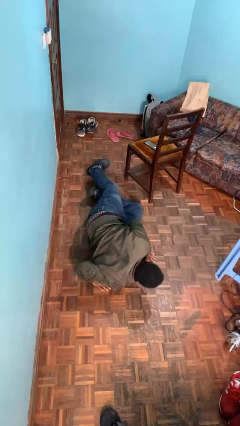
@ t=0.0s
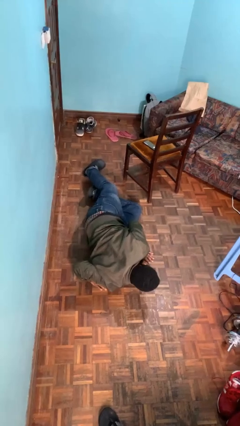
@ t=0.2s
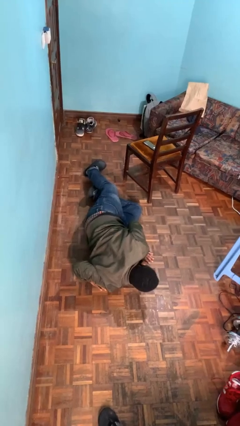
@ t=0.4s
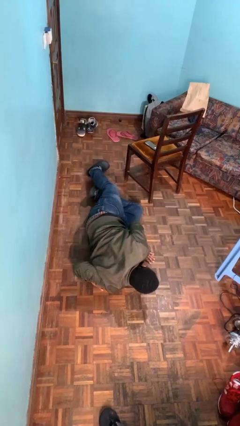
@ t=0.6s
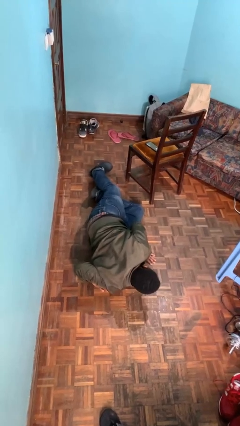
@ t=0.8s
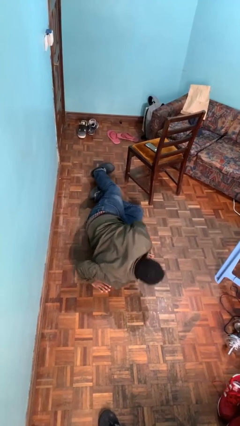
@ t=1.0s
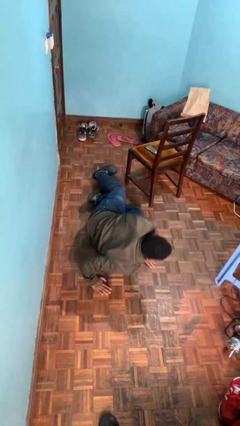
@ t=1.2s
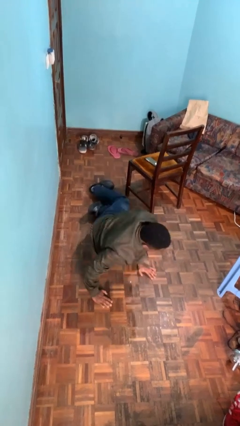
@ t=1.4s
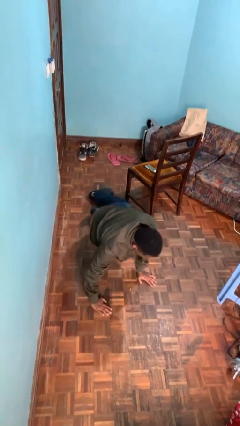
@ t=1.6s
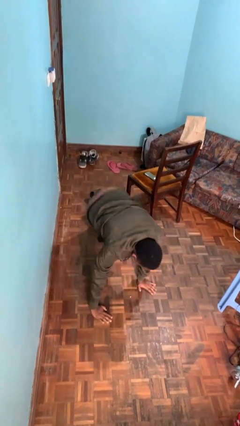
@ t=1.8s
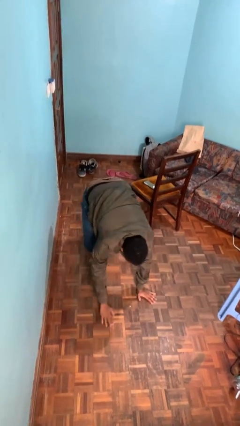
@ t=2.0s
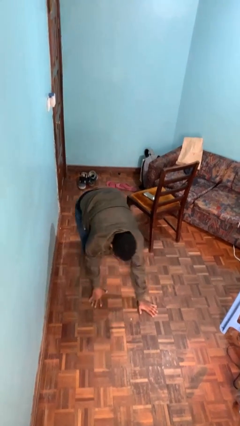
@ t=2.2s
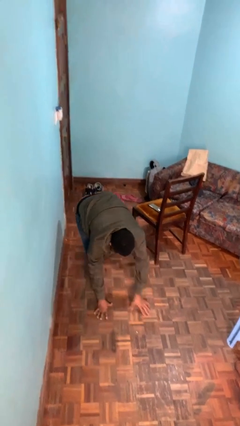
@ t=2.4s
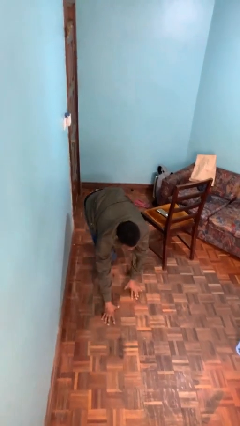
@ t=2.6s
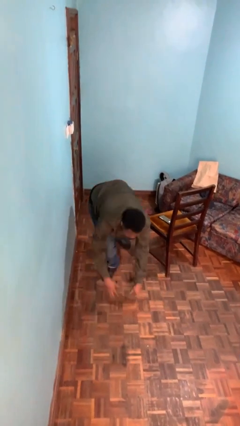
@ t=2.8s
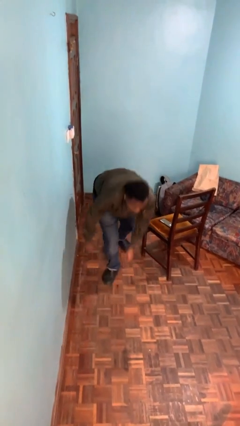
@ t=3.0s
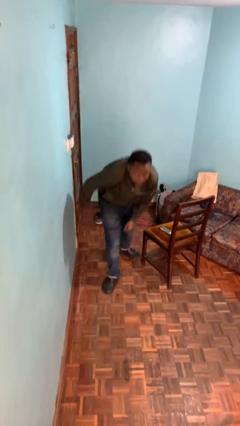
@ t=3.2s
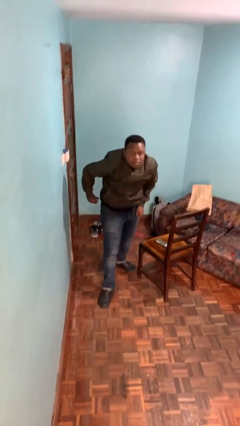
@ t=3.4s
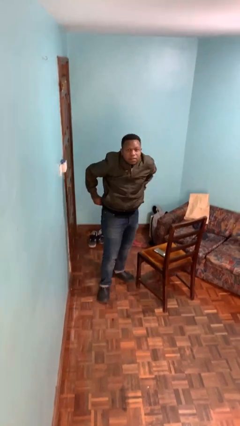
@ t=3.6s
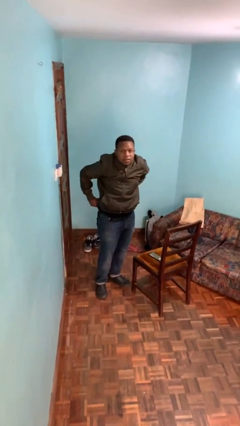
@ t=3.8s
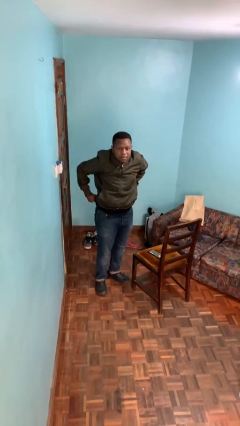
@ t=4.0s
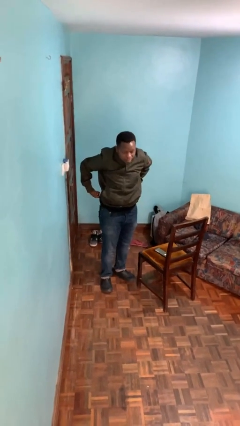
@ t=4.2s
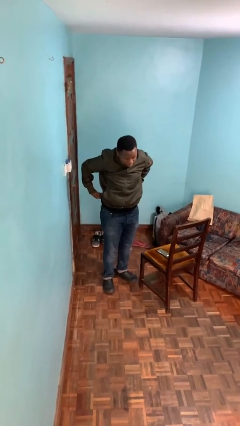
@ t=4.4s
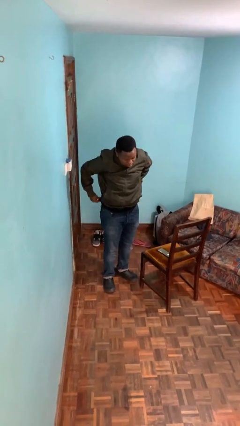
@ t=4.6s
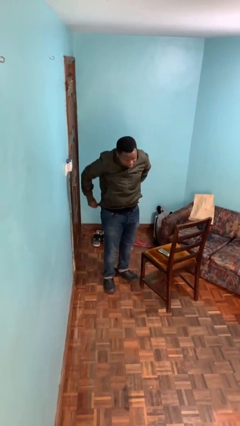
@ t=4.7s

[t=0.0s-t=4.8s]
person stands up from floor

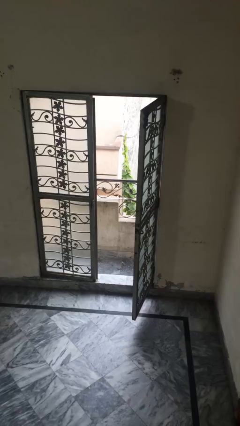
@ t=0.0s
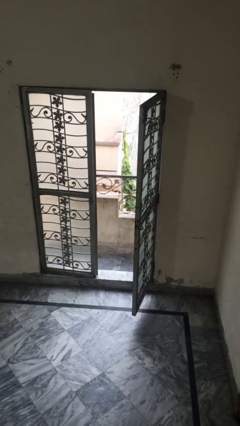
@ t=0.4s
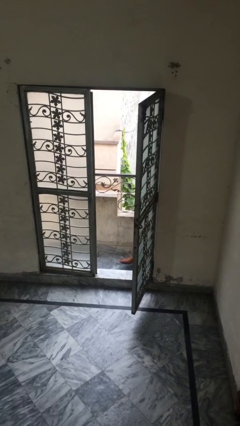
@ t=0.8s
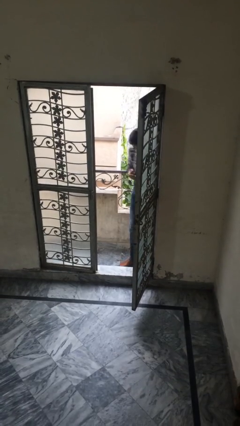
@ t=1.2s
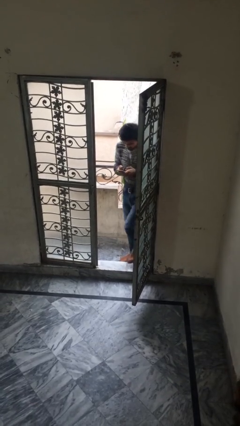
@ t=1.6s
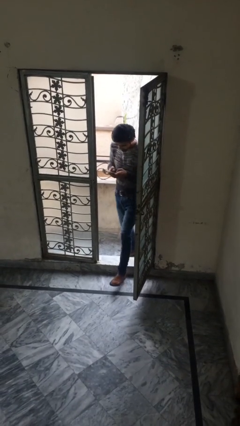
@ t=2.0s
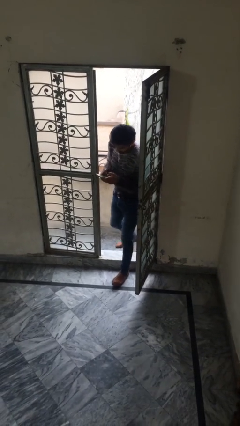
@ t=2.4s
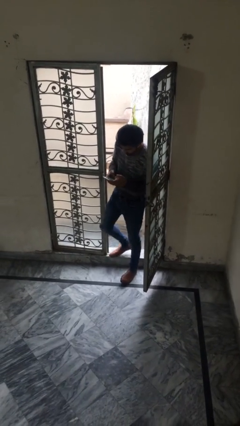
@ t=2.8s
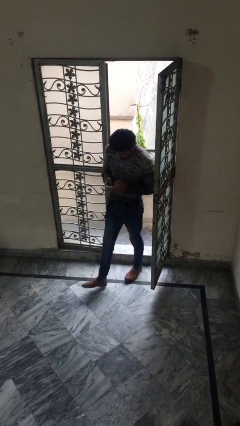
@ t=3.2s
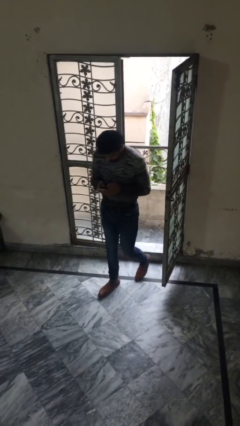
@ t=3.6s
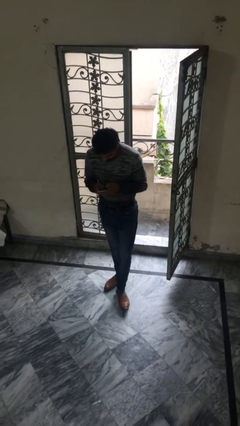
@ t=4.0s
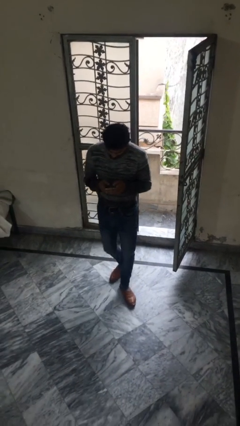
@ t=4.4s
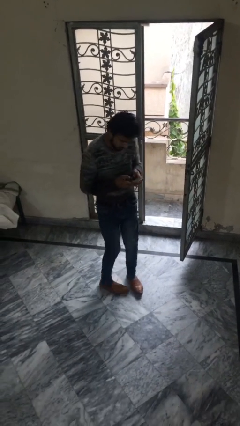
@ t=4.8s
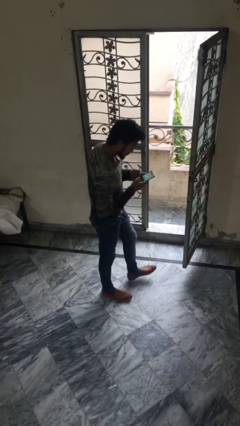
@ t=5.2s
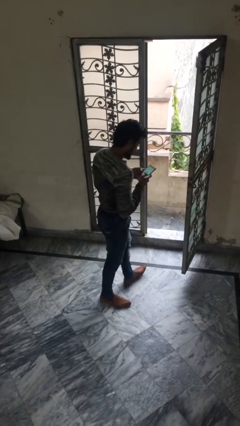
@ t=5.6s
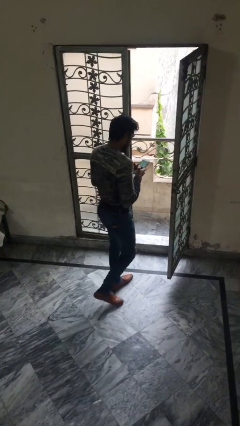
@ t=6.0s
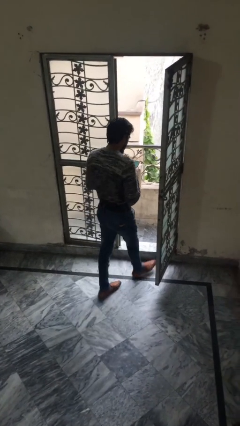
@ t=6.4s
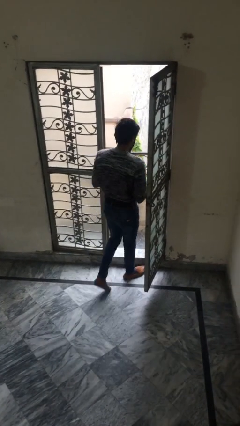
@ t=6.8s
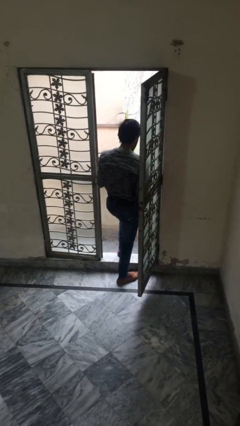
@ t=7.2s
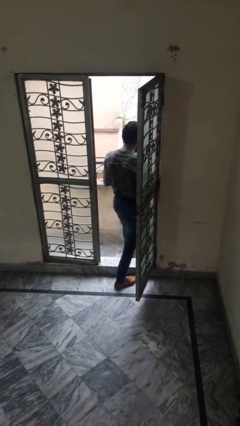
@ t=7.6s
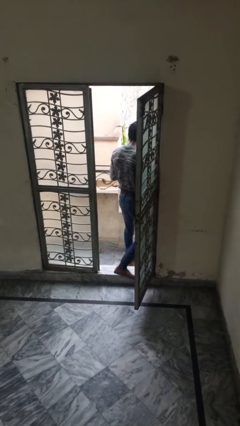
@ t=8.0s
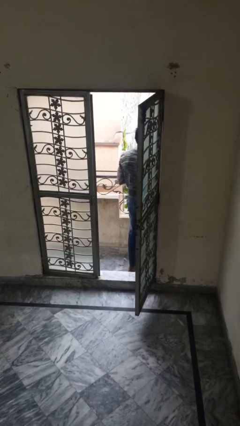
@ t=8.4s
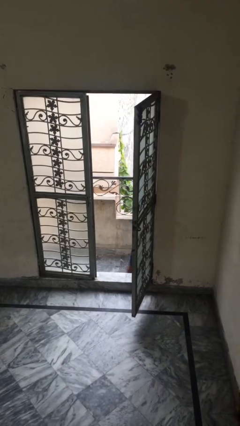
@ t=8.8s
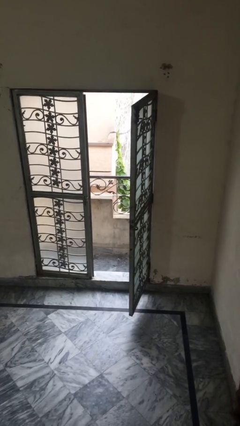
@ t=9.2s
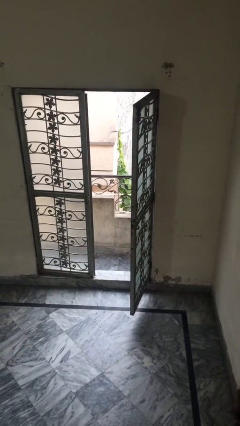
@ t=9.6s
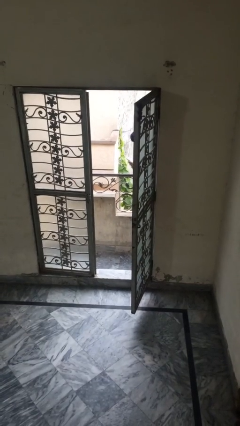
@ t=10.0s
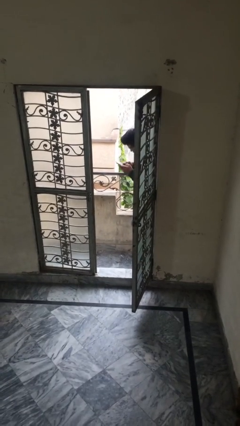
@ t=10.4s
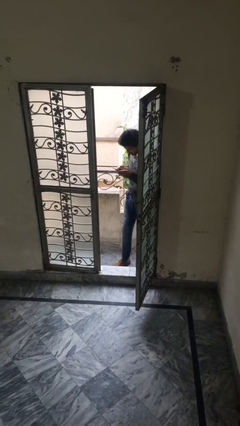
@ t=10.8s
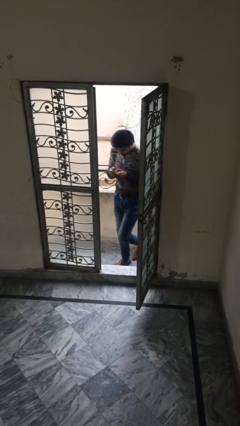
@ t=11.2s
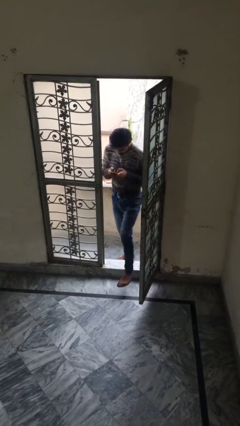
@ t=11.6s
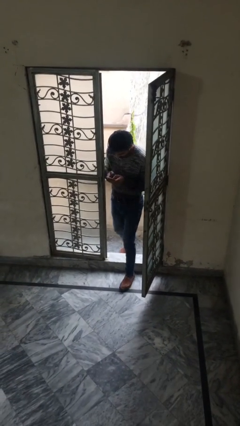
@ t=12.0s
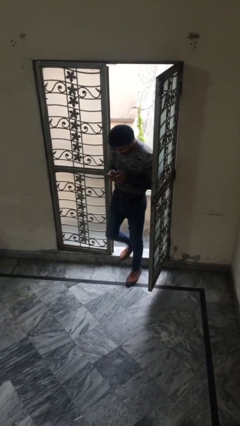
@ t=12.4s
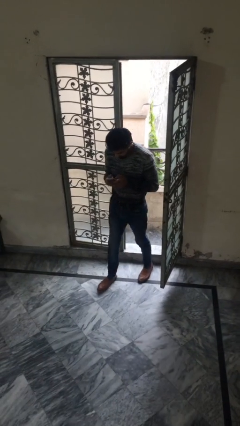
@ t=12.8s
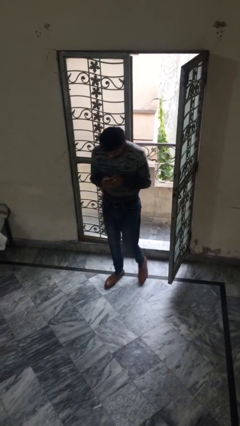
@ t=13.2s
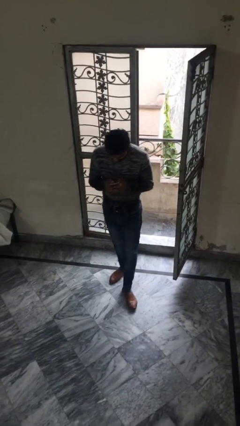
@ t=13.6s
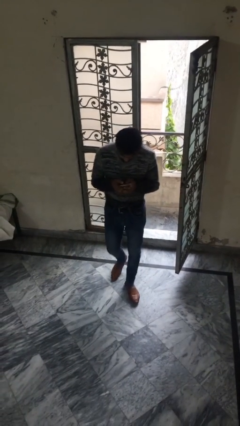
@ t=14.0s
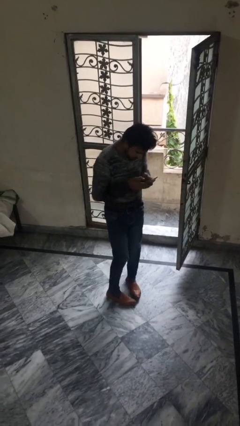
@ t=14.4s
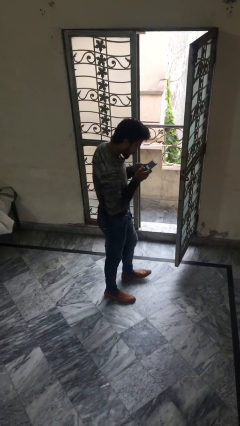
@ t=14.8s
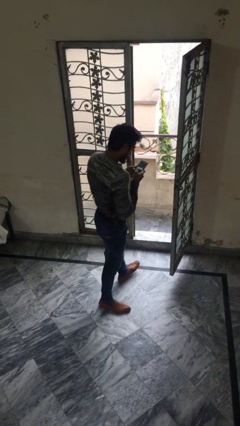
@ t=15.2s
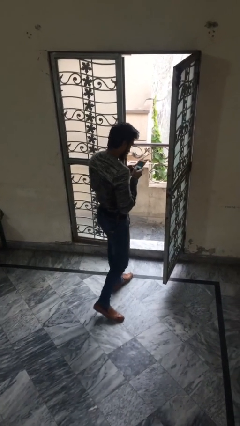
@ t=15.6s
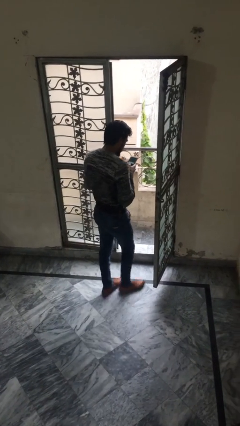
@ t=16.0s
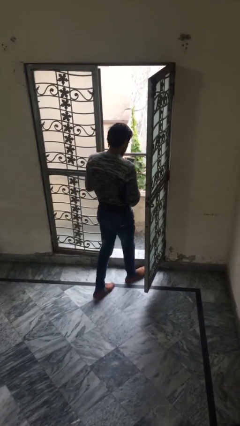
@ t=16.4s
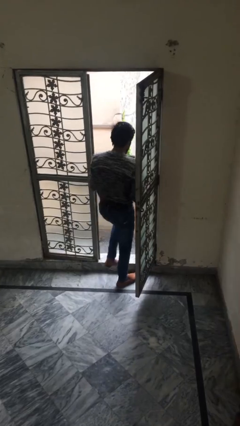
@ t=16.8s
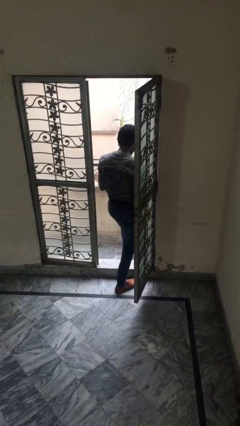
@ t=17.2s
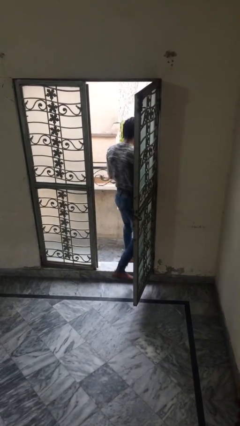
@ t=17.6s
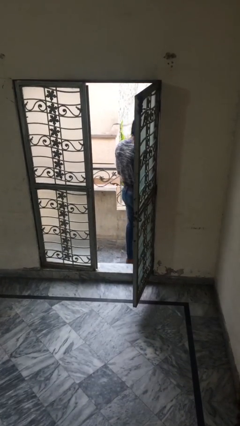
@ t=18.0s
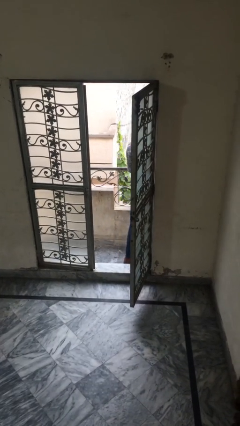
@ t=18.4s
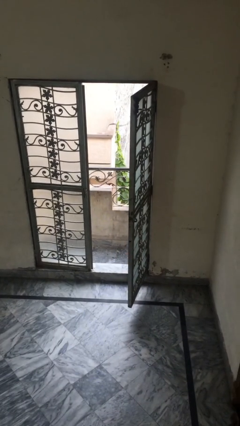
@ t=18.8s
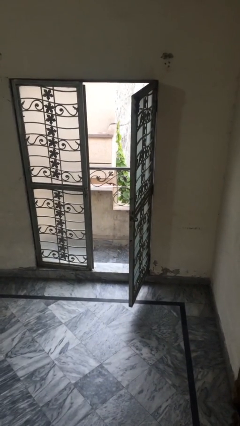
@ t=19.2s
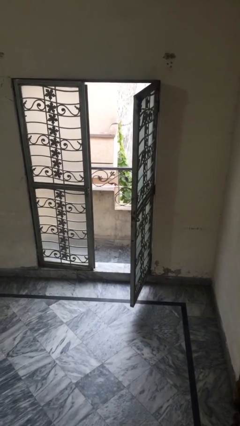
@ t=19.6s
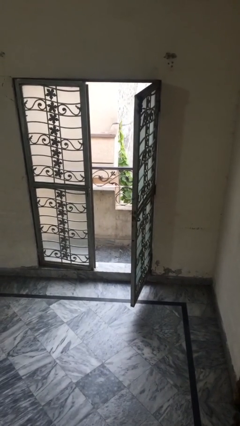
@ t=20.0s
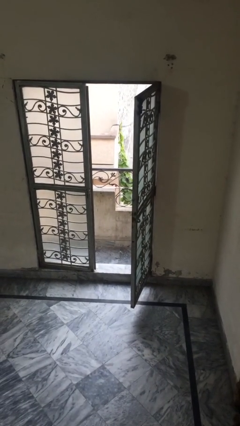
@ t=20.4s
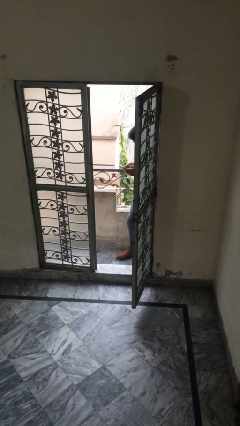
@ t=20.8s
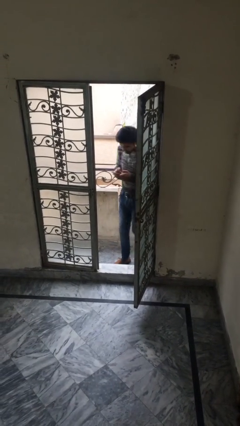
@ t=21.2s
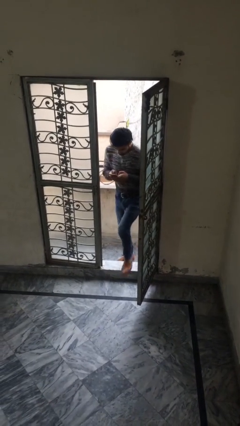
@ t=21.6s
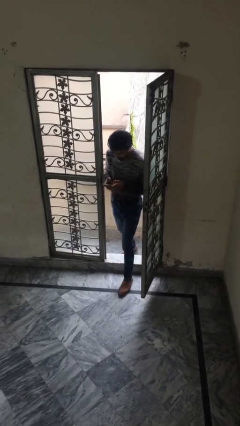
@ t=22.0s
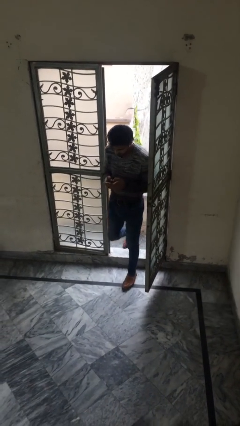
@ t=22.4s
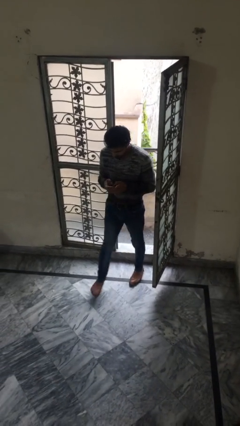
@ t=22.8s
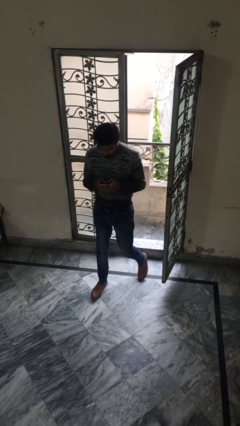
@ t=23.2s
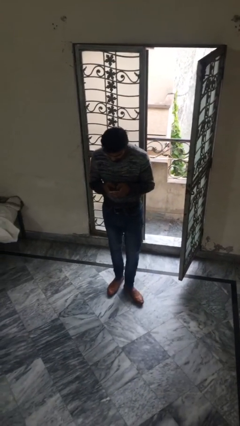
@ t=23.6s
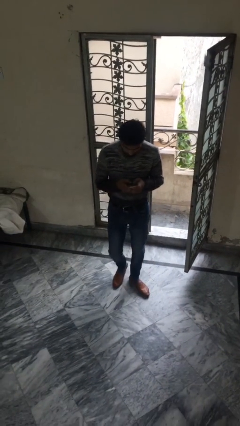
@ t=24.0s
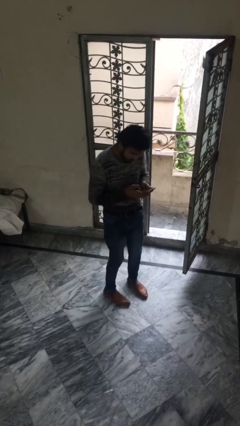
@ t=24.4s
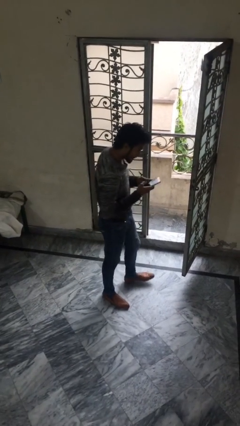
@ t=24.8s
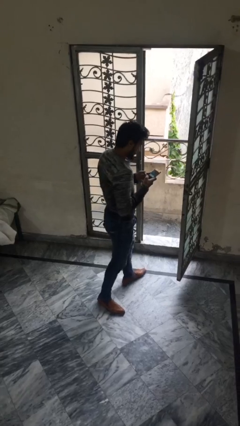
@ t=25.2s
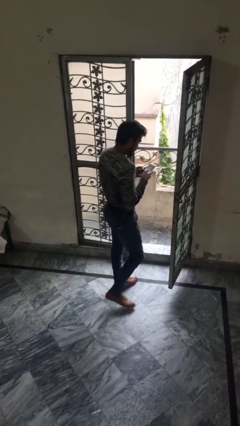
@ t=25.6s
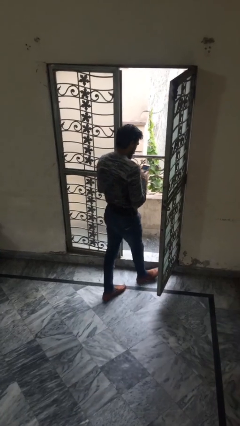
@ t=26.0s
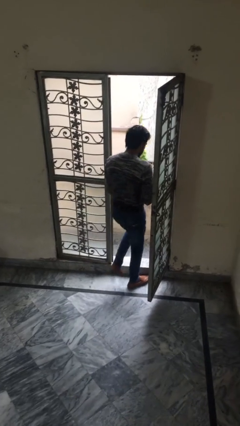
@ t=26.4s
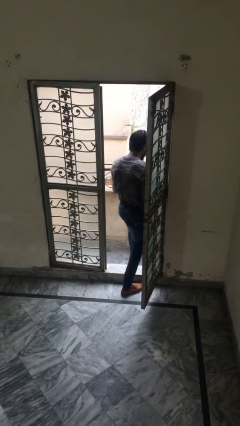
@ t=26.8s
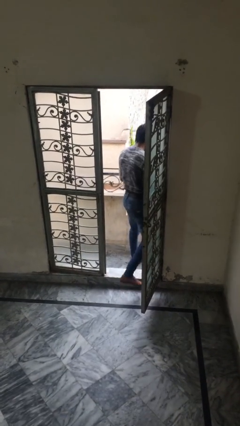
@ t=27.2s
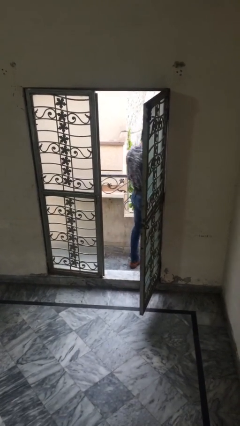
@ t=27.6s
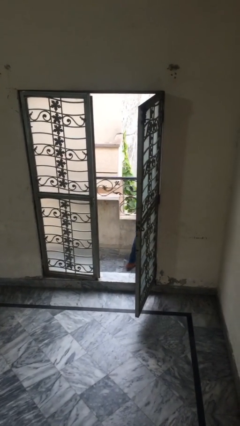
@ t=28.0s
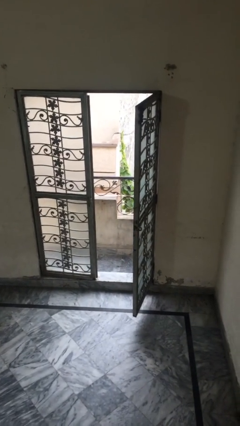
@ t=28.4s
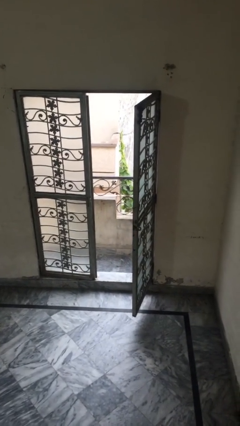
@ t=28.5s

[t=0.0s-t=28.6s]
person texts on phone
